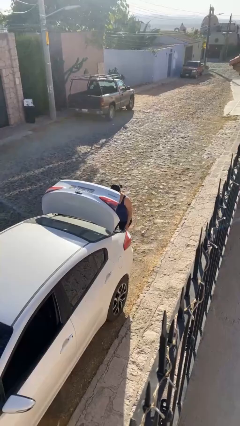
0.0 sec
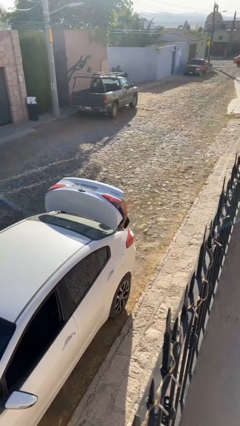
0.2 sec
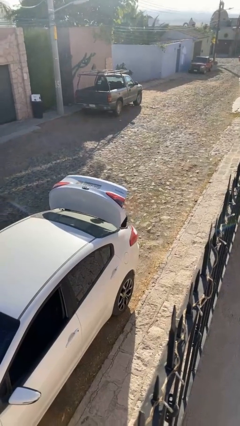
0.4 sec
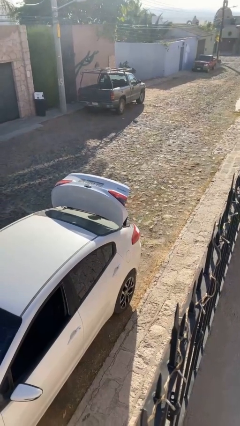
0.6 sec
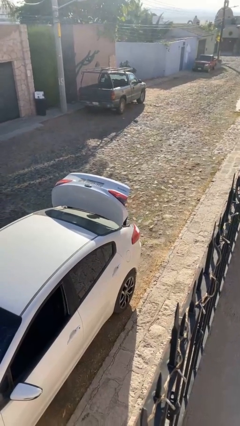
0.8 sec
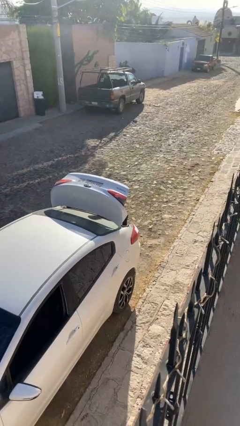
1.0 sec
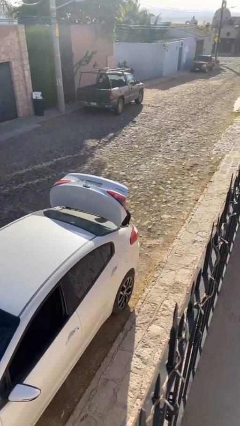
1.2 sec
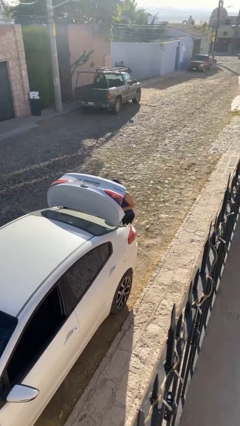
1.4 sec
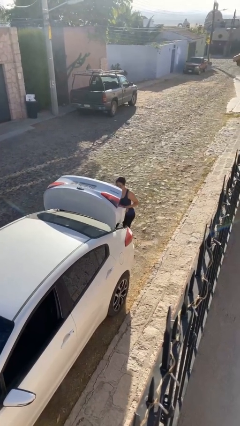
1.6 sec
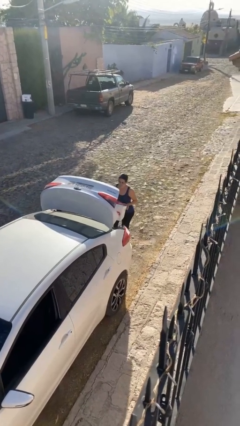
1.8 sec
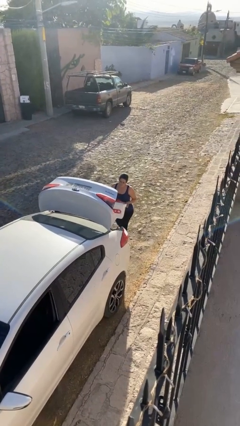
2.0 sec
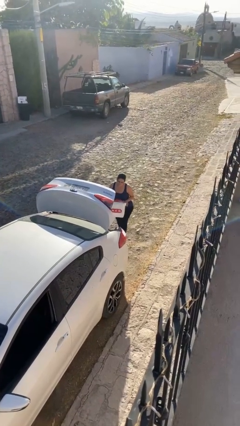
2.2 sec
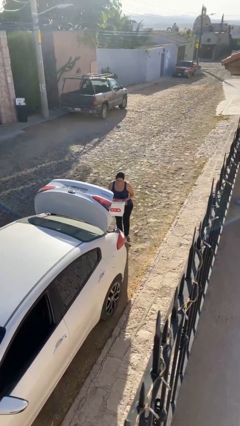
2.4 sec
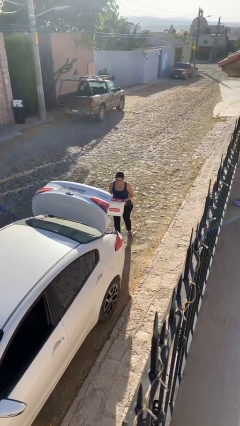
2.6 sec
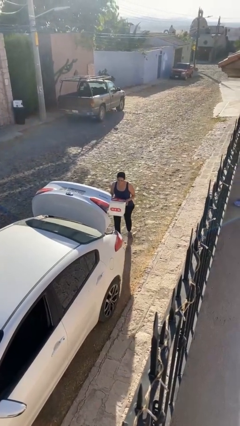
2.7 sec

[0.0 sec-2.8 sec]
person unloads car

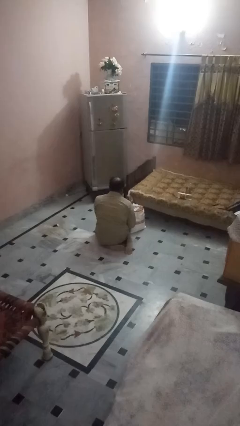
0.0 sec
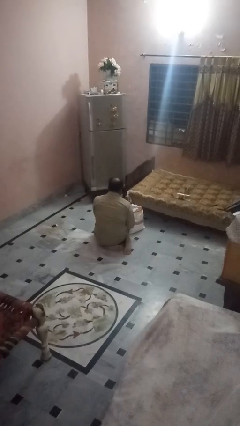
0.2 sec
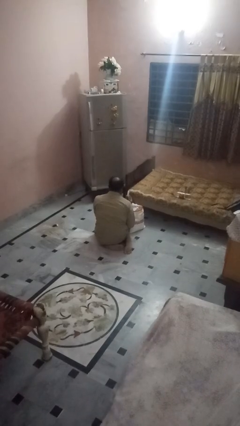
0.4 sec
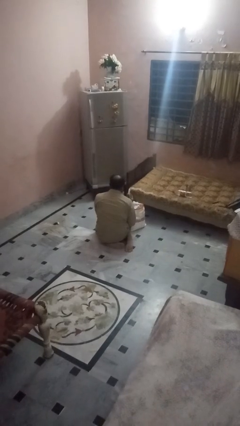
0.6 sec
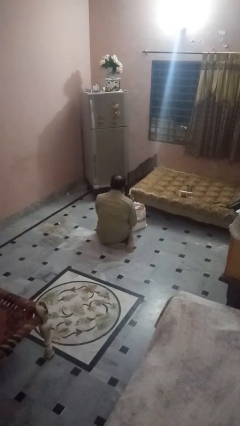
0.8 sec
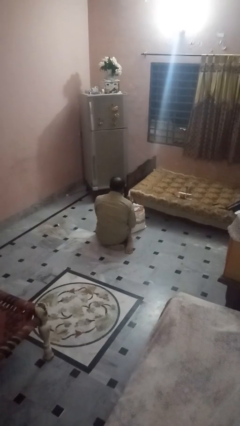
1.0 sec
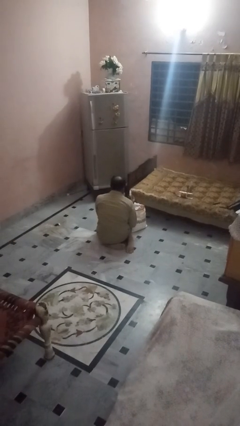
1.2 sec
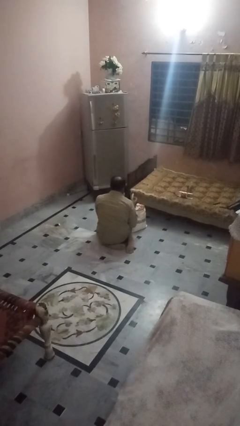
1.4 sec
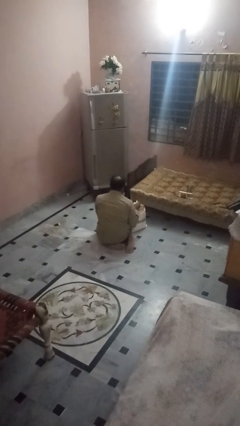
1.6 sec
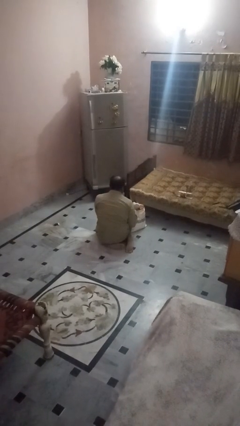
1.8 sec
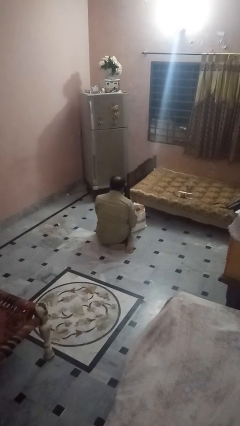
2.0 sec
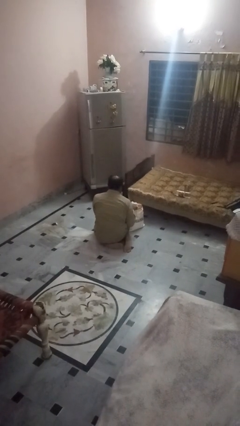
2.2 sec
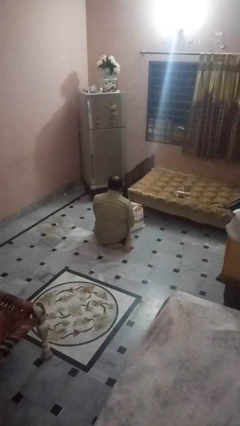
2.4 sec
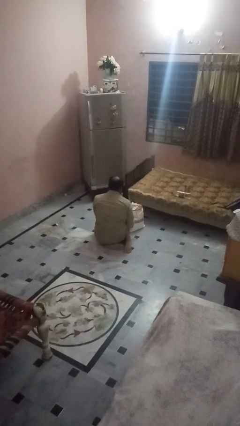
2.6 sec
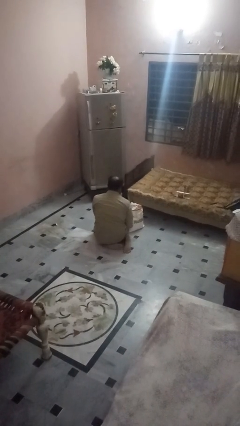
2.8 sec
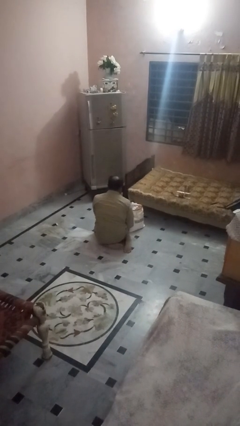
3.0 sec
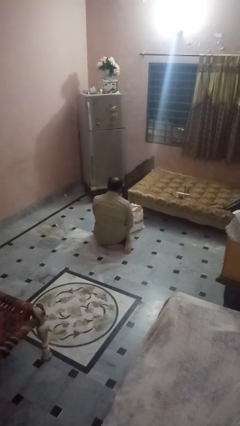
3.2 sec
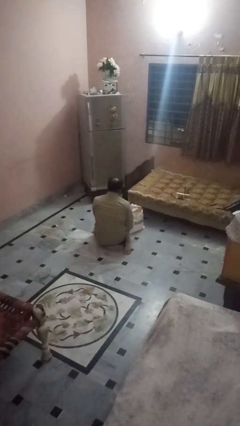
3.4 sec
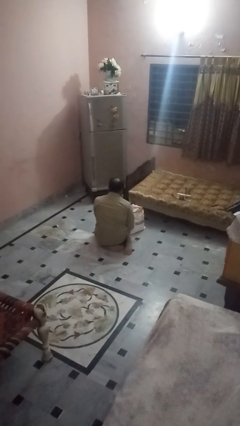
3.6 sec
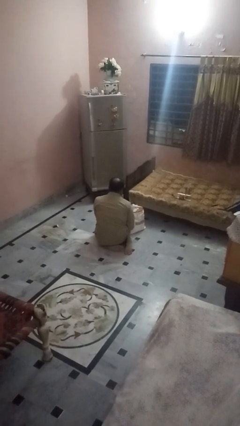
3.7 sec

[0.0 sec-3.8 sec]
person puts object into bag

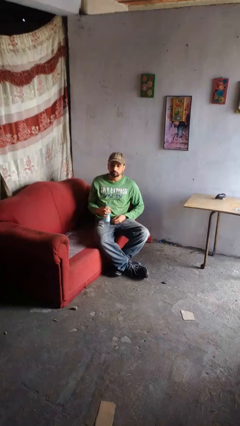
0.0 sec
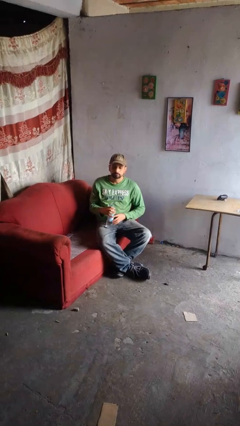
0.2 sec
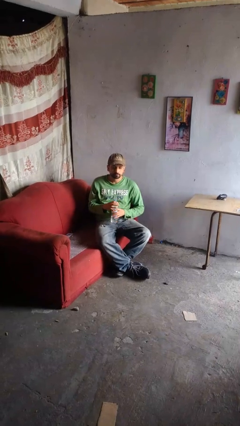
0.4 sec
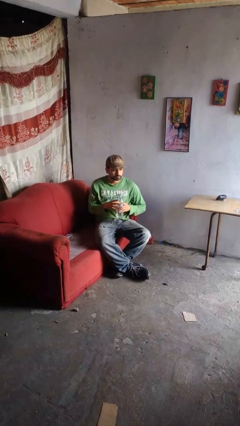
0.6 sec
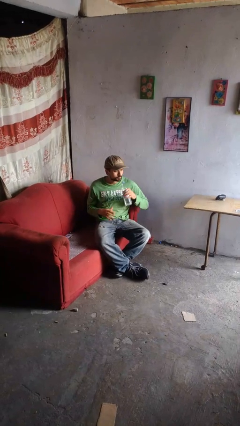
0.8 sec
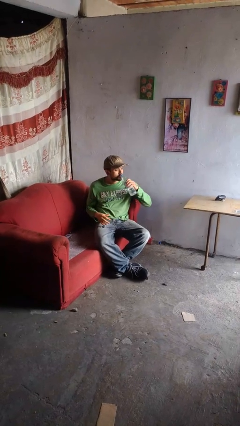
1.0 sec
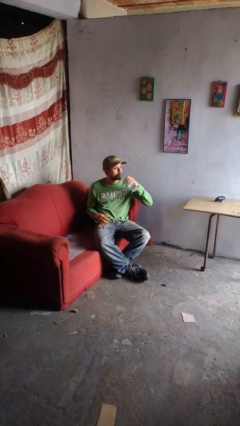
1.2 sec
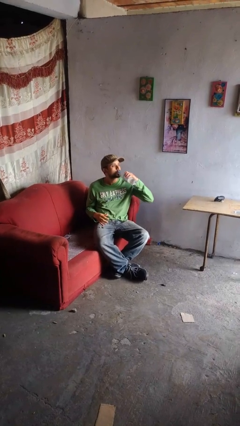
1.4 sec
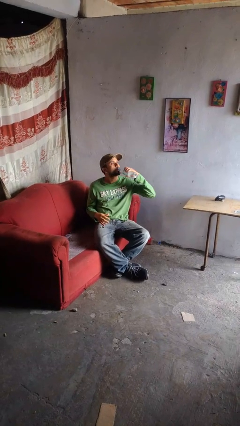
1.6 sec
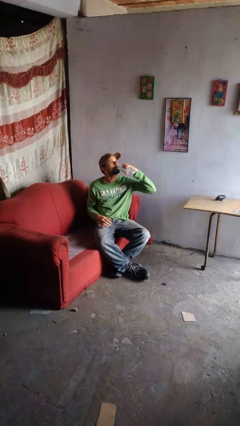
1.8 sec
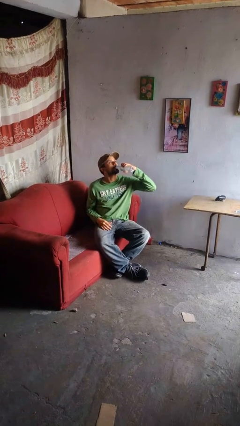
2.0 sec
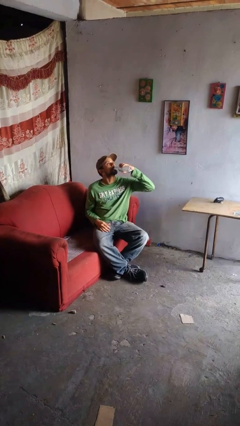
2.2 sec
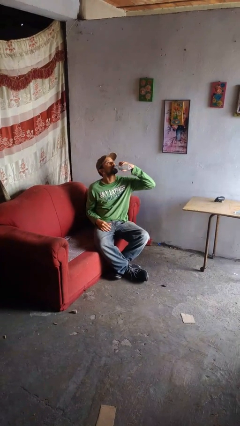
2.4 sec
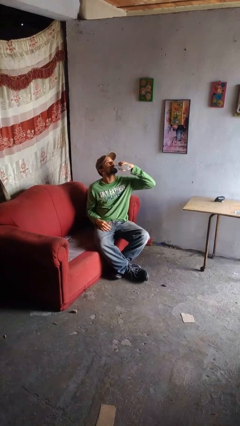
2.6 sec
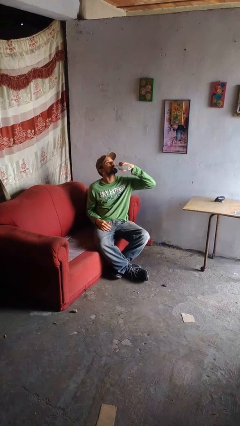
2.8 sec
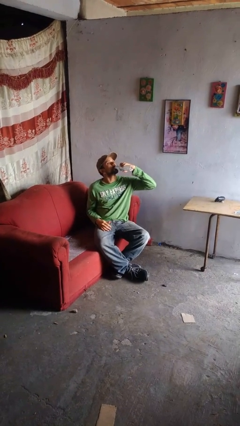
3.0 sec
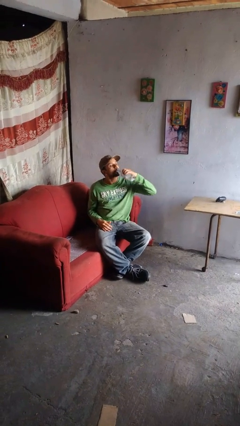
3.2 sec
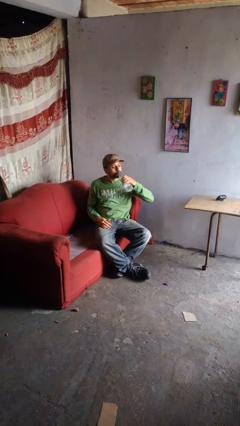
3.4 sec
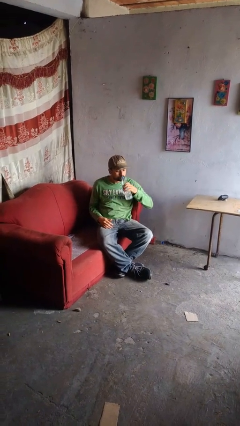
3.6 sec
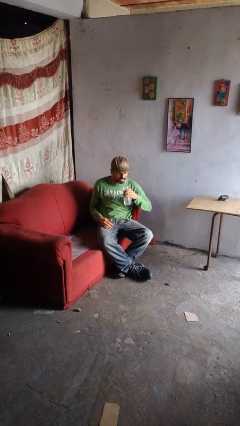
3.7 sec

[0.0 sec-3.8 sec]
person drinks from bottle

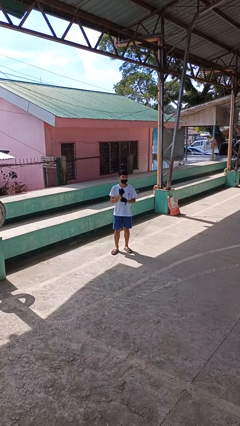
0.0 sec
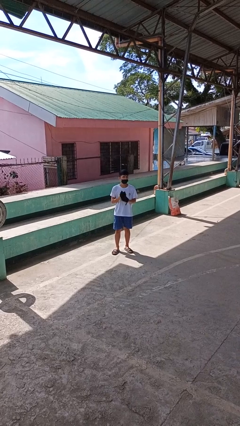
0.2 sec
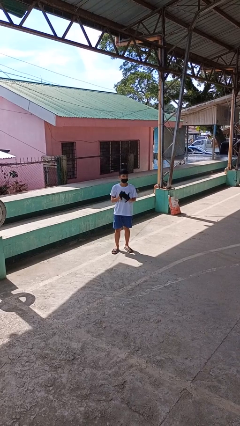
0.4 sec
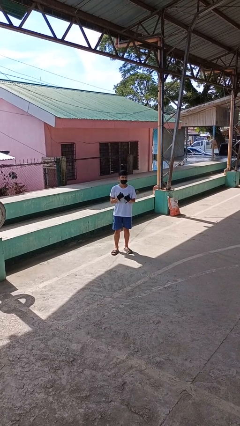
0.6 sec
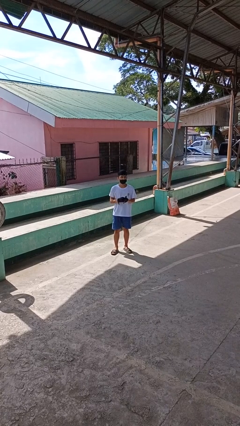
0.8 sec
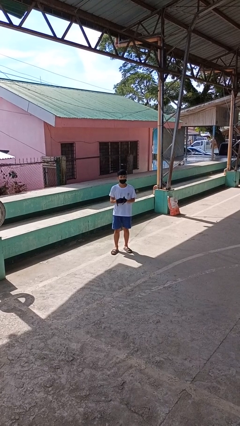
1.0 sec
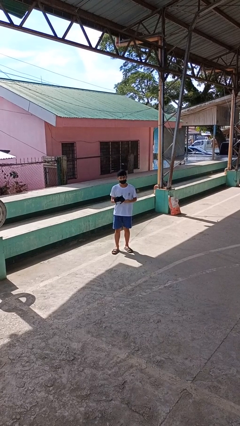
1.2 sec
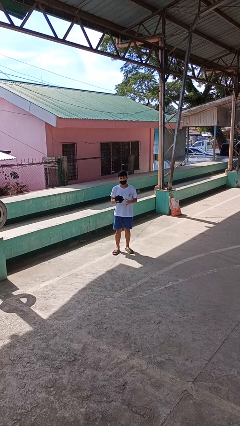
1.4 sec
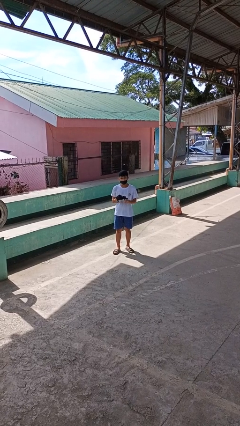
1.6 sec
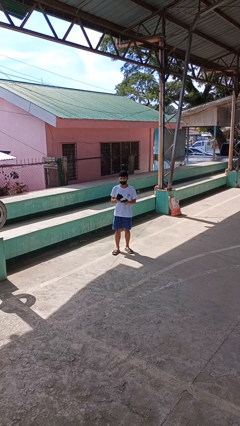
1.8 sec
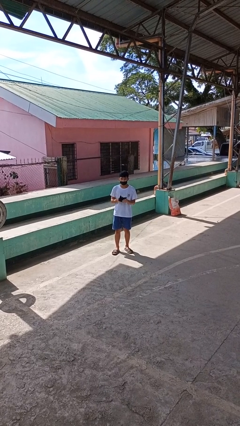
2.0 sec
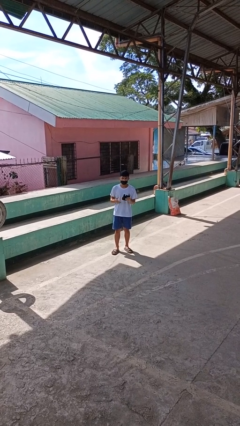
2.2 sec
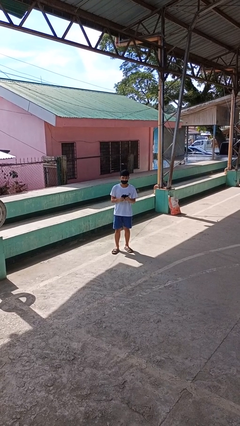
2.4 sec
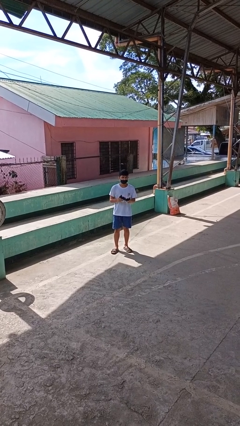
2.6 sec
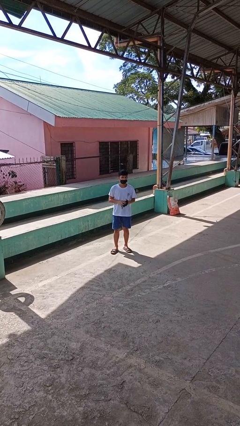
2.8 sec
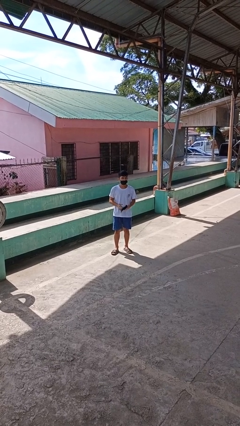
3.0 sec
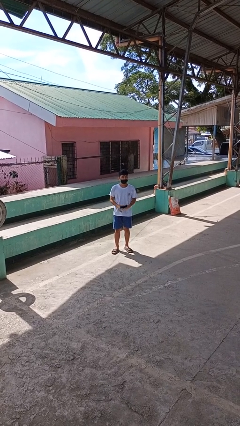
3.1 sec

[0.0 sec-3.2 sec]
person takes off gloves

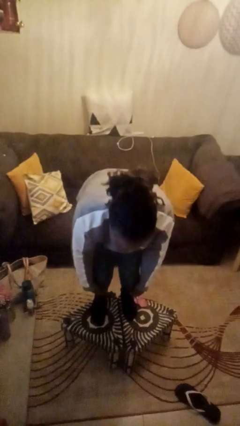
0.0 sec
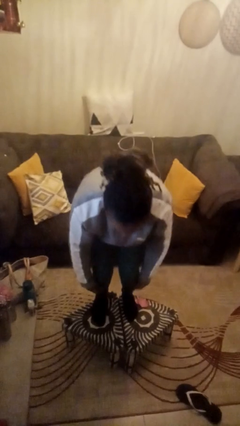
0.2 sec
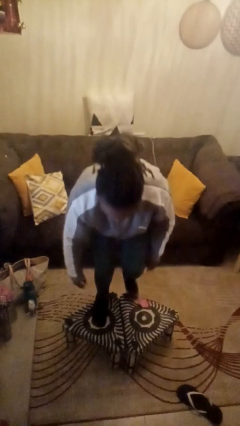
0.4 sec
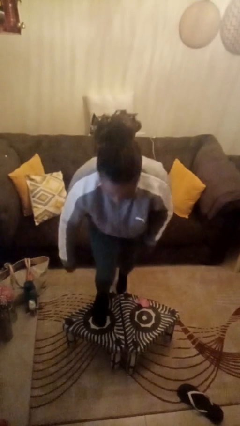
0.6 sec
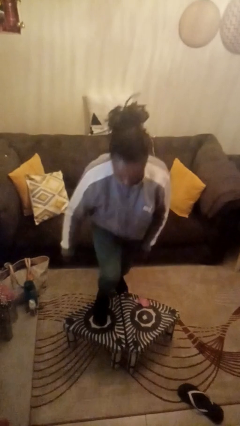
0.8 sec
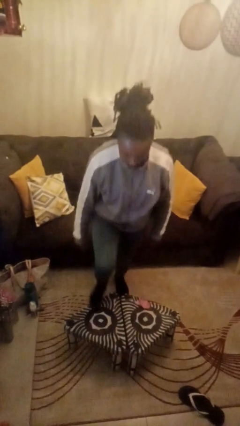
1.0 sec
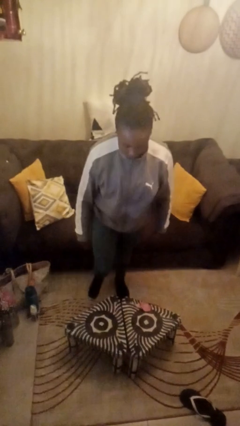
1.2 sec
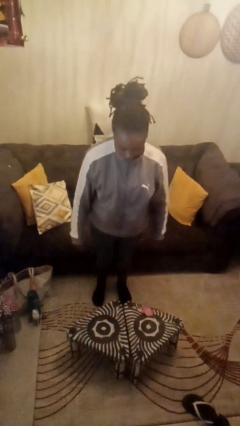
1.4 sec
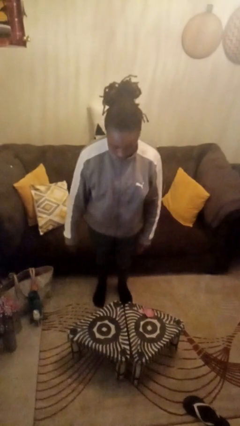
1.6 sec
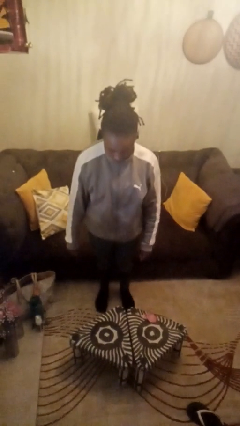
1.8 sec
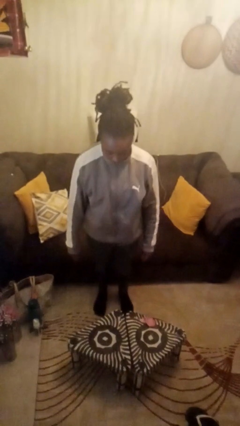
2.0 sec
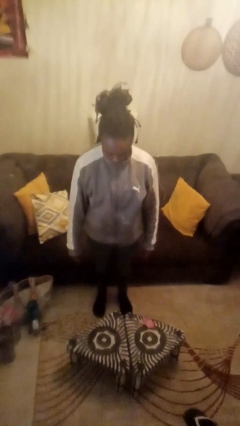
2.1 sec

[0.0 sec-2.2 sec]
person climbs off table

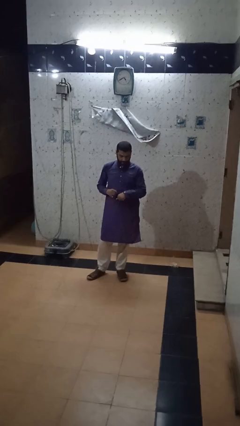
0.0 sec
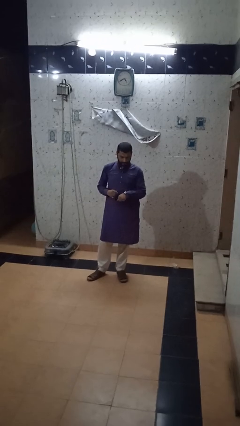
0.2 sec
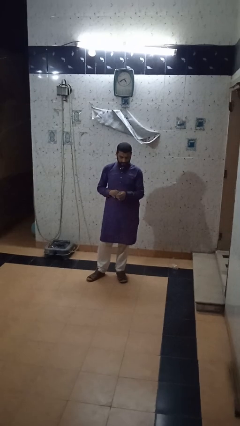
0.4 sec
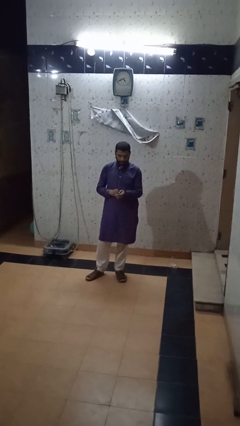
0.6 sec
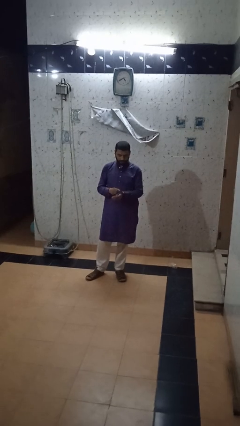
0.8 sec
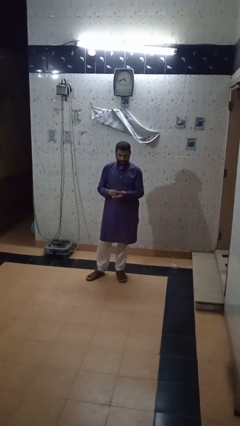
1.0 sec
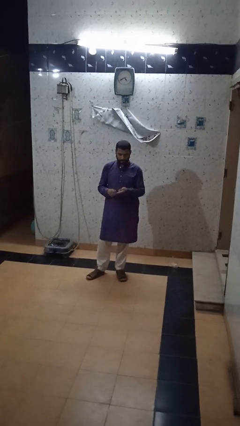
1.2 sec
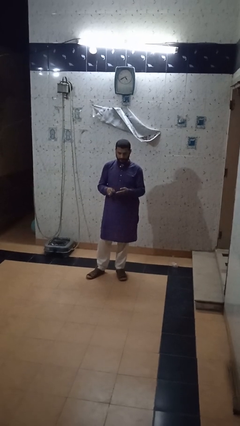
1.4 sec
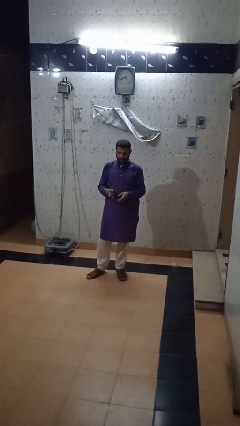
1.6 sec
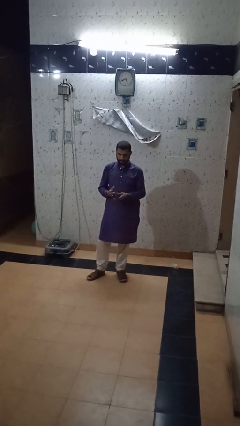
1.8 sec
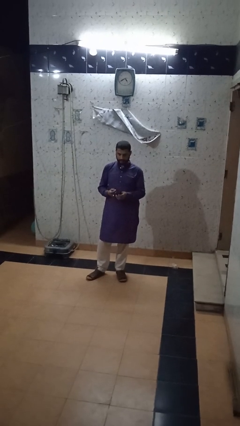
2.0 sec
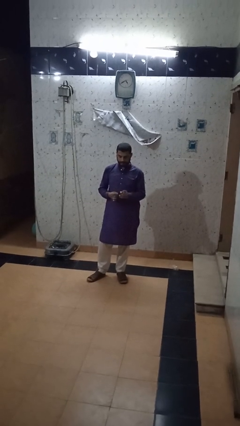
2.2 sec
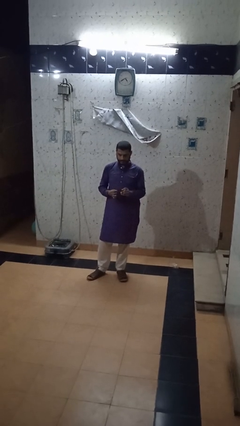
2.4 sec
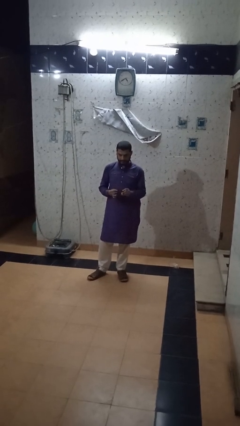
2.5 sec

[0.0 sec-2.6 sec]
person takes off wristwatch
